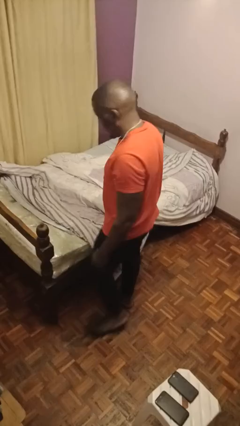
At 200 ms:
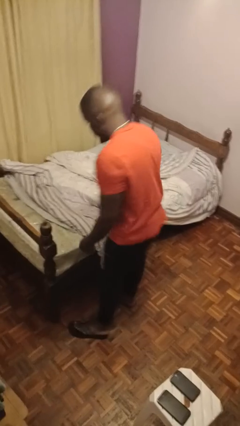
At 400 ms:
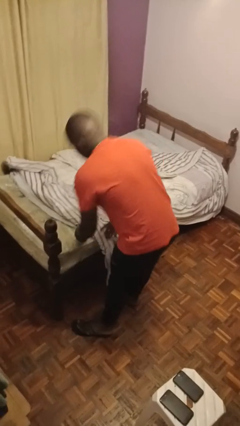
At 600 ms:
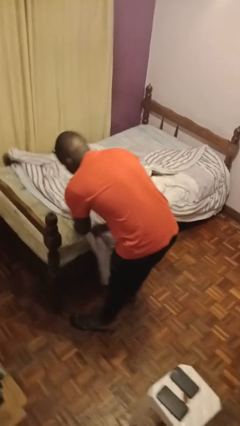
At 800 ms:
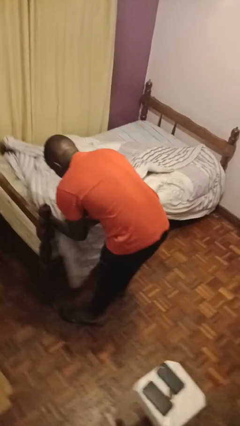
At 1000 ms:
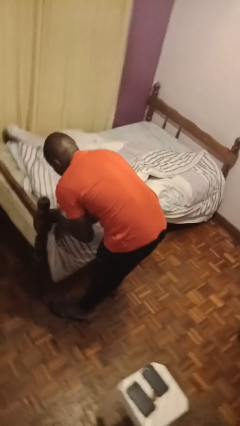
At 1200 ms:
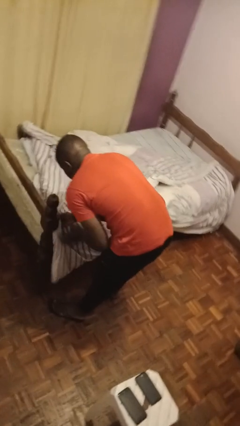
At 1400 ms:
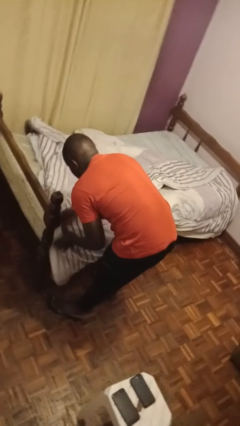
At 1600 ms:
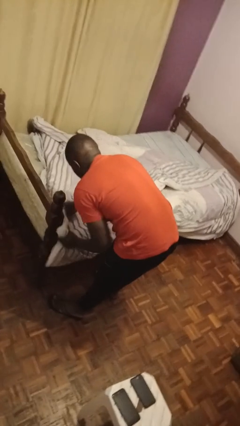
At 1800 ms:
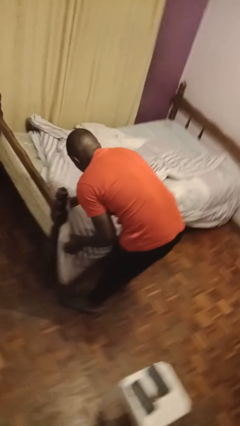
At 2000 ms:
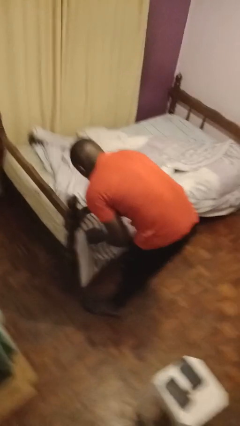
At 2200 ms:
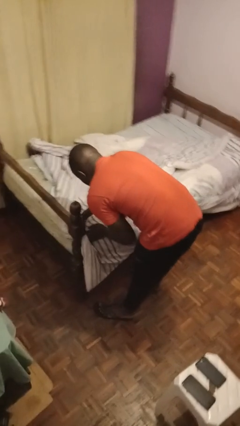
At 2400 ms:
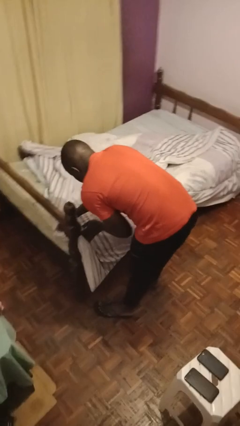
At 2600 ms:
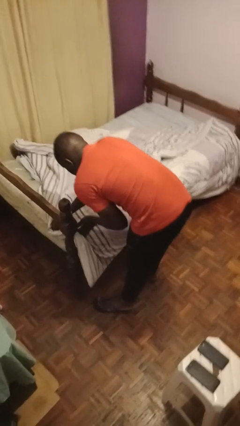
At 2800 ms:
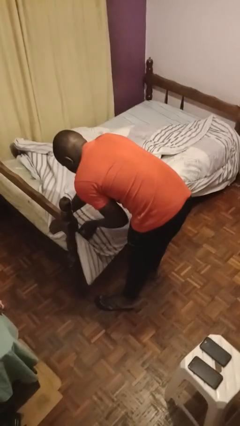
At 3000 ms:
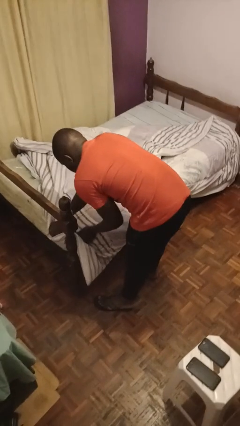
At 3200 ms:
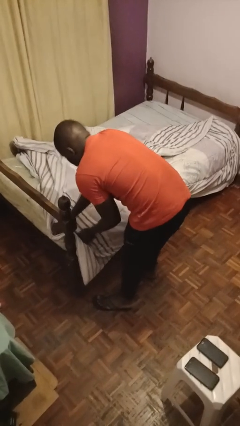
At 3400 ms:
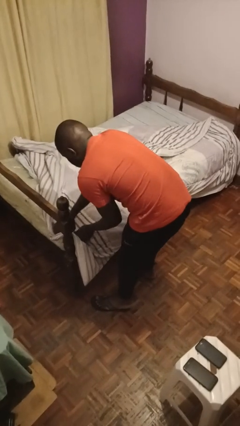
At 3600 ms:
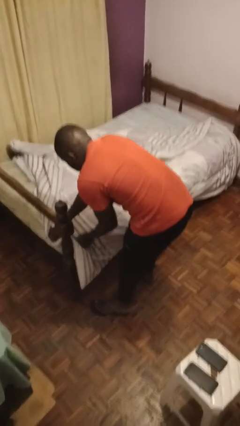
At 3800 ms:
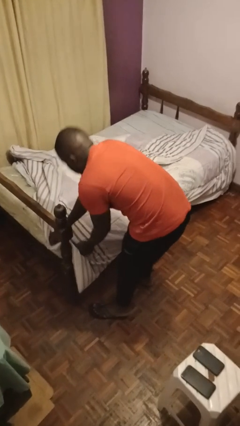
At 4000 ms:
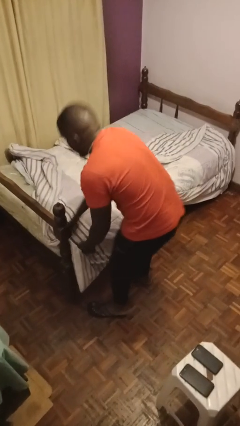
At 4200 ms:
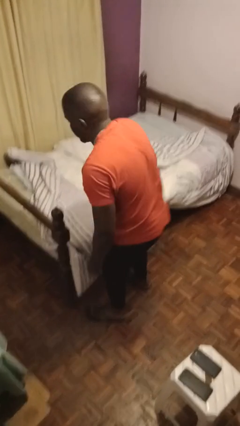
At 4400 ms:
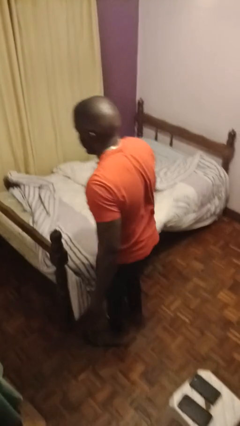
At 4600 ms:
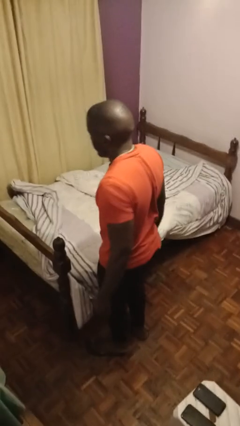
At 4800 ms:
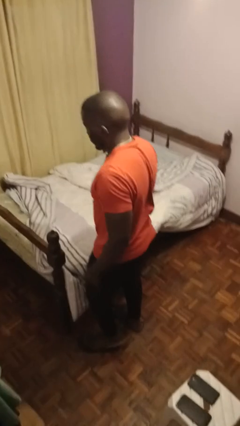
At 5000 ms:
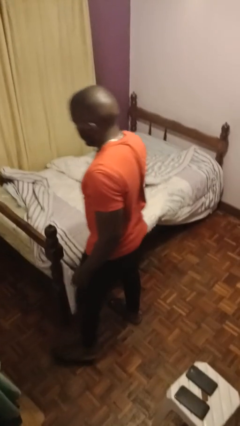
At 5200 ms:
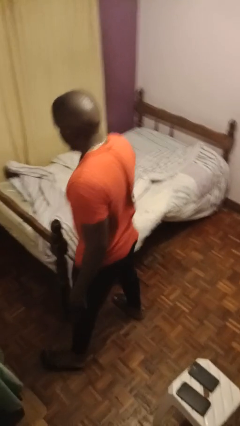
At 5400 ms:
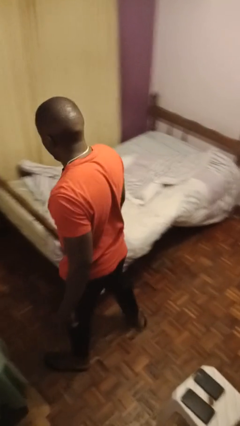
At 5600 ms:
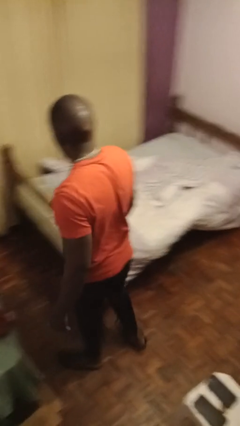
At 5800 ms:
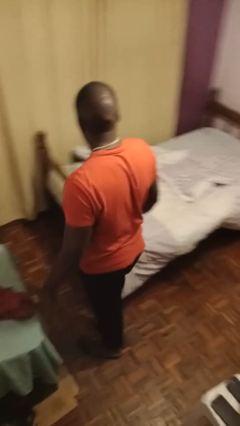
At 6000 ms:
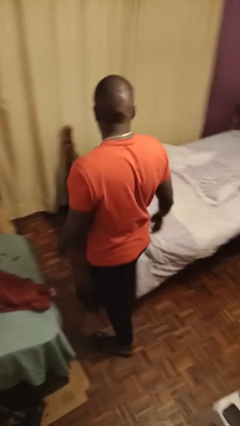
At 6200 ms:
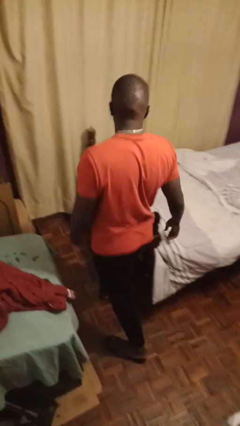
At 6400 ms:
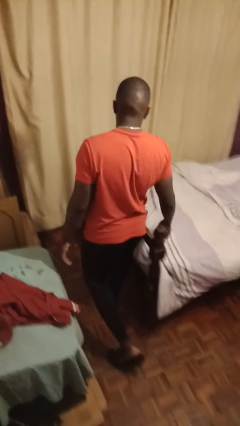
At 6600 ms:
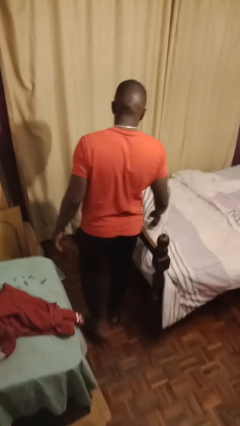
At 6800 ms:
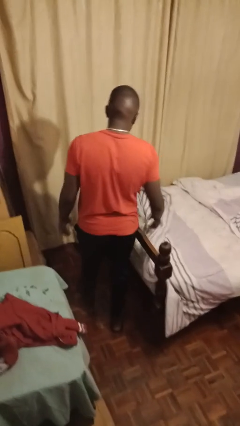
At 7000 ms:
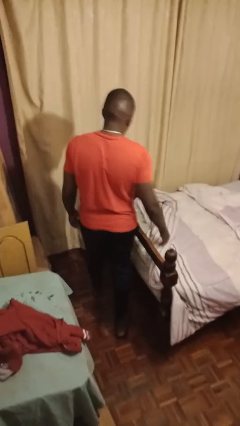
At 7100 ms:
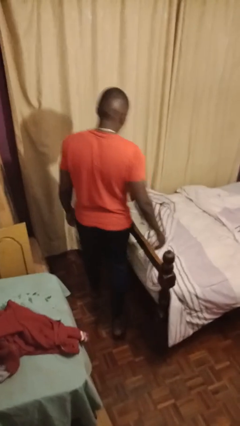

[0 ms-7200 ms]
person makes bed

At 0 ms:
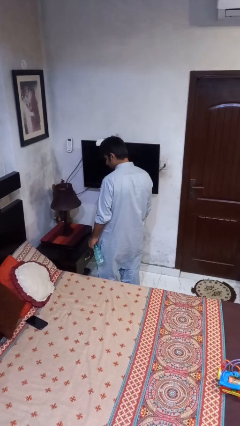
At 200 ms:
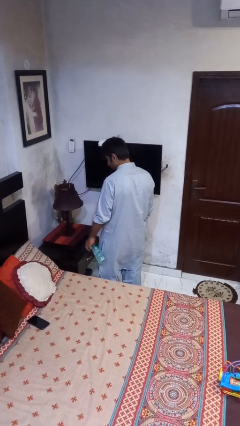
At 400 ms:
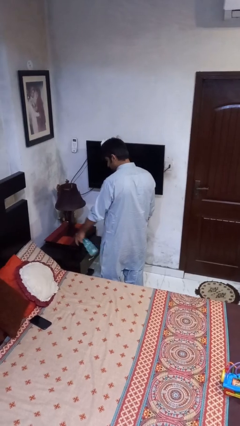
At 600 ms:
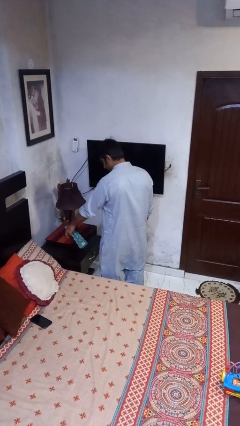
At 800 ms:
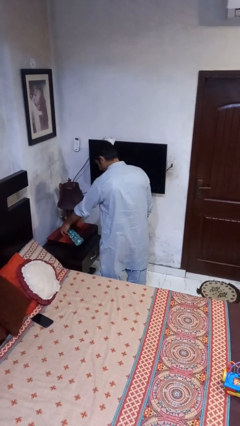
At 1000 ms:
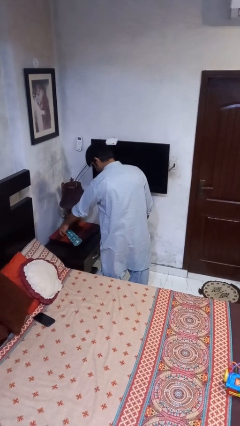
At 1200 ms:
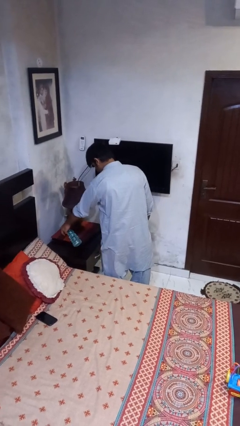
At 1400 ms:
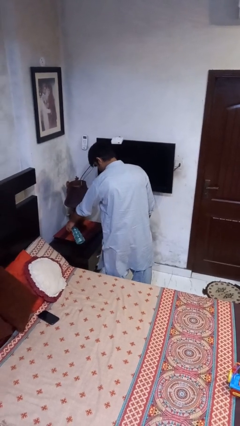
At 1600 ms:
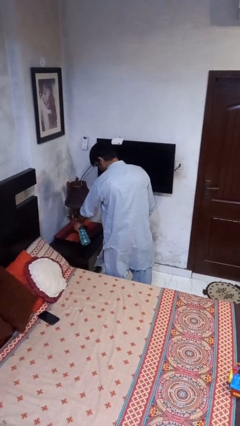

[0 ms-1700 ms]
person sprays from bottle

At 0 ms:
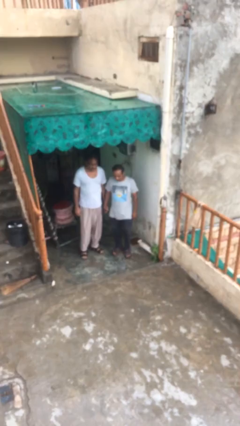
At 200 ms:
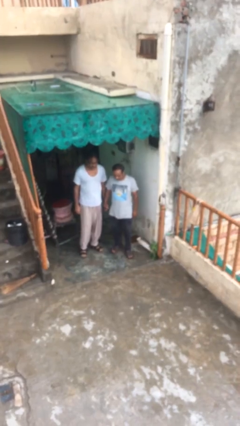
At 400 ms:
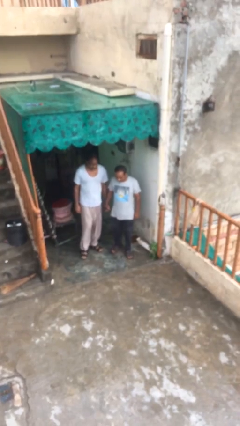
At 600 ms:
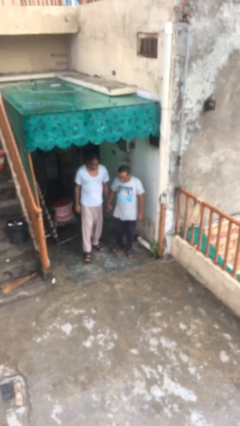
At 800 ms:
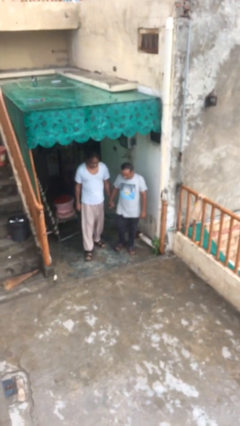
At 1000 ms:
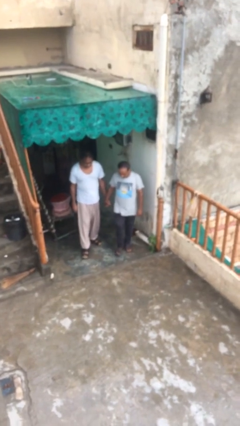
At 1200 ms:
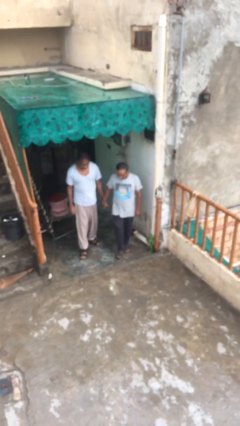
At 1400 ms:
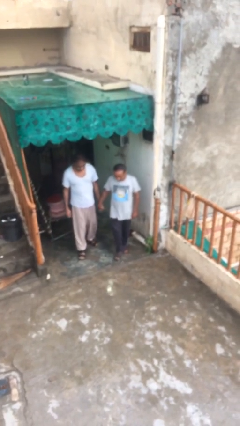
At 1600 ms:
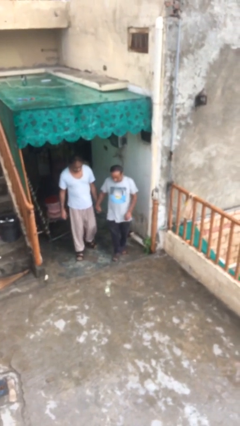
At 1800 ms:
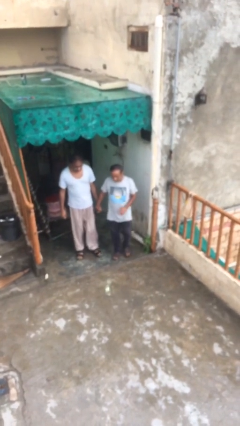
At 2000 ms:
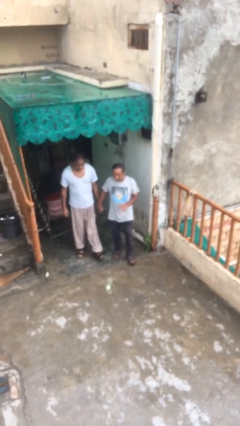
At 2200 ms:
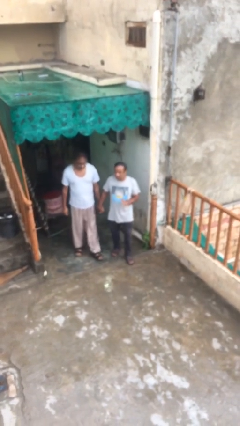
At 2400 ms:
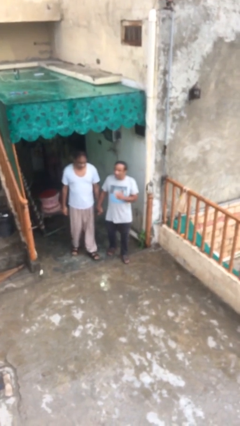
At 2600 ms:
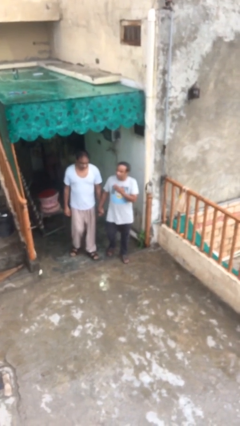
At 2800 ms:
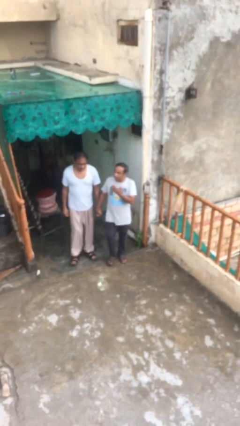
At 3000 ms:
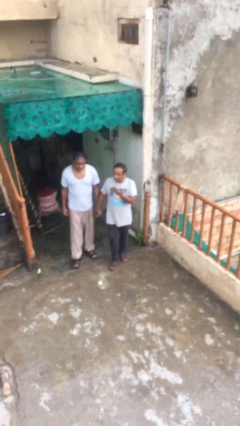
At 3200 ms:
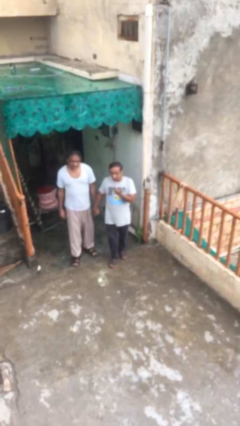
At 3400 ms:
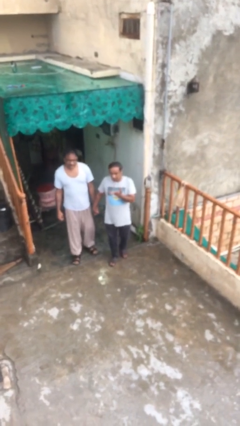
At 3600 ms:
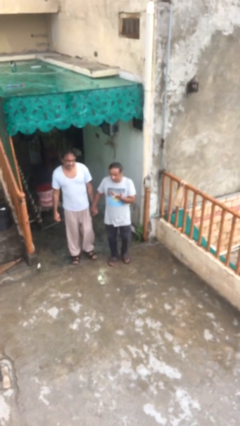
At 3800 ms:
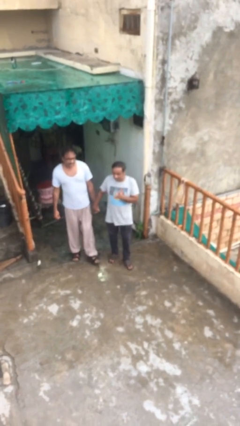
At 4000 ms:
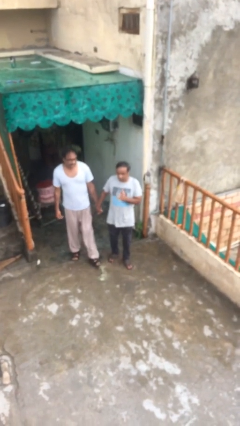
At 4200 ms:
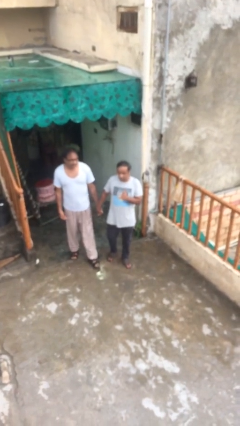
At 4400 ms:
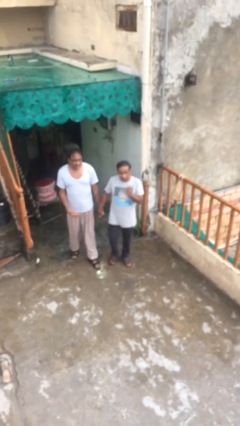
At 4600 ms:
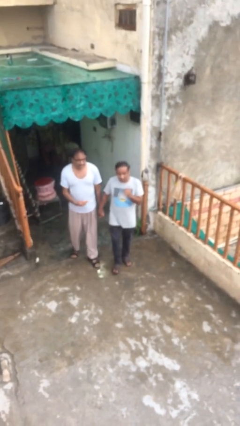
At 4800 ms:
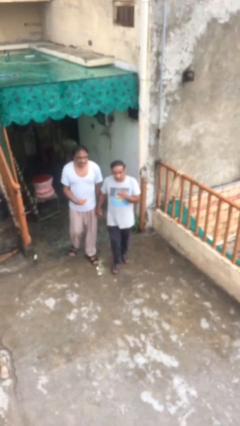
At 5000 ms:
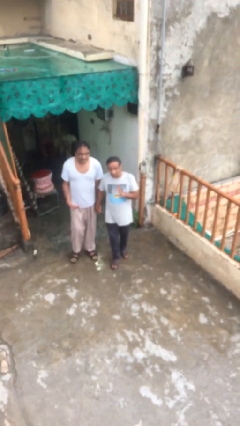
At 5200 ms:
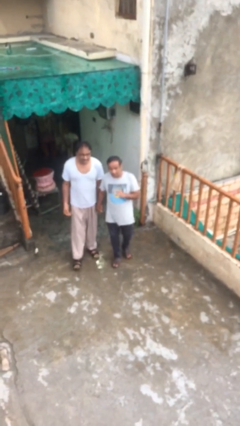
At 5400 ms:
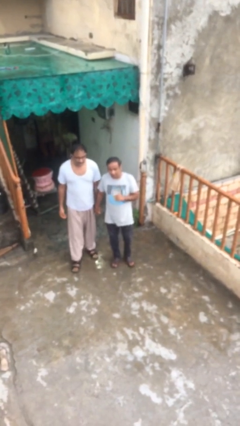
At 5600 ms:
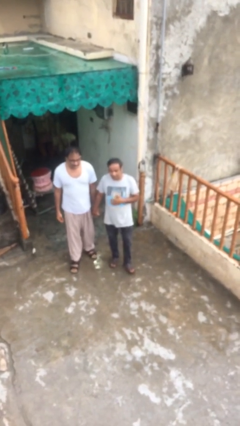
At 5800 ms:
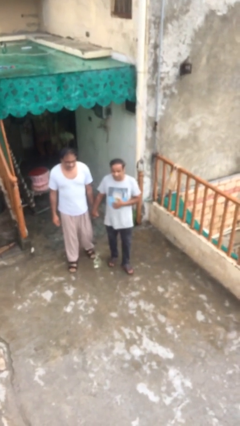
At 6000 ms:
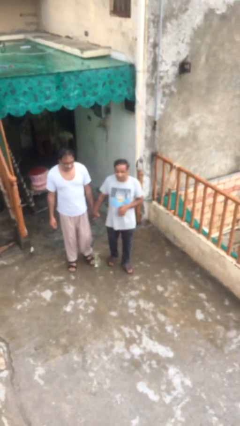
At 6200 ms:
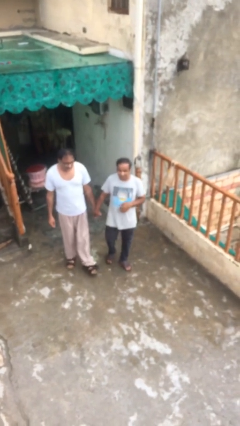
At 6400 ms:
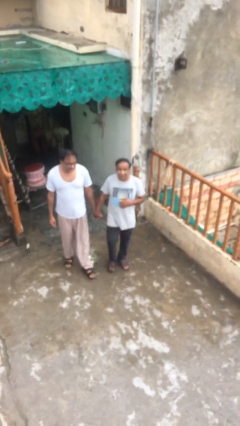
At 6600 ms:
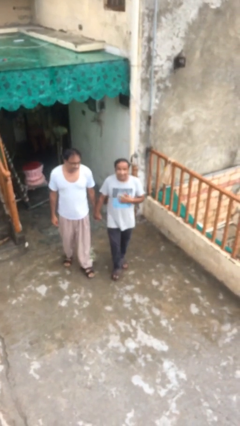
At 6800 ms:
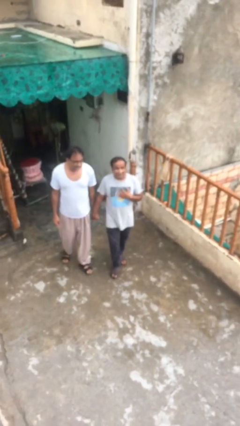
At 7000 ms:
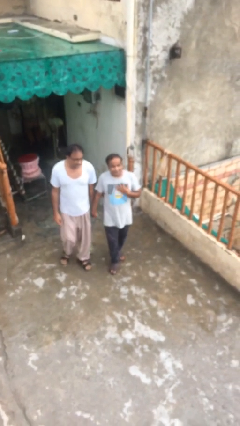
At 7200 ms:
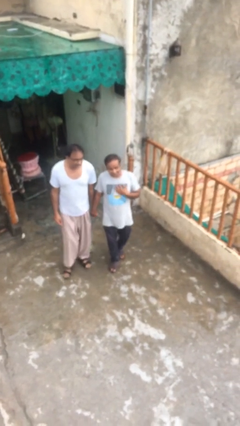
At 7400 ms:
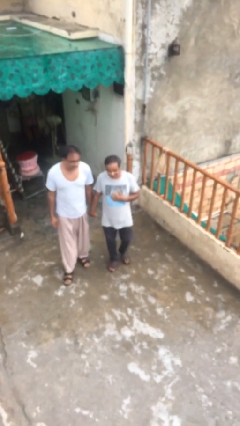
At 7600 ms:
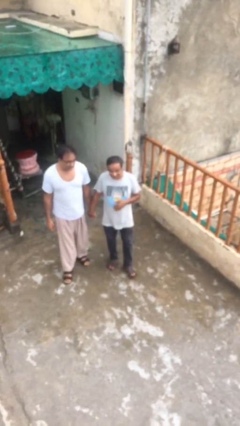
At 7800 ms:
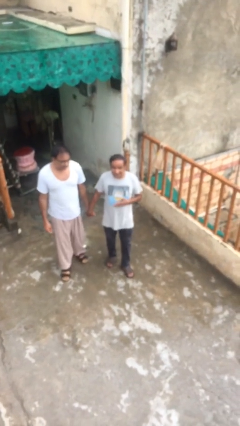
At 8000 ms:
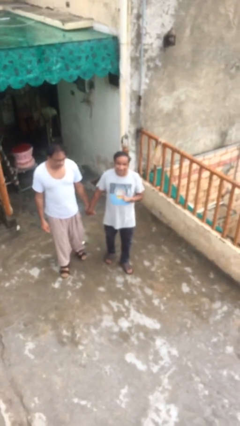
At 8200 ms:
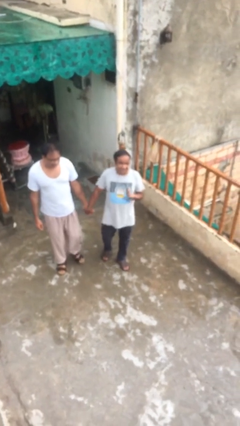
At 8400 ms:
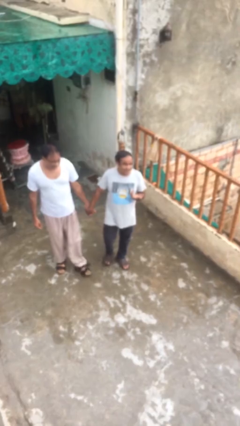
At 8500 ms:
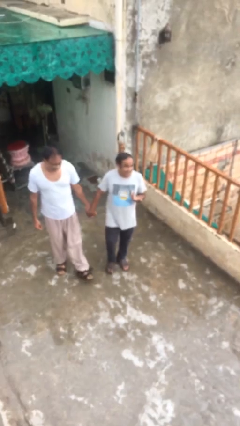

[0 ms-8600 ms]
person holds hand

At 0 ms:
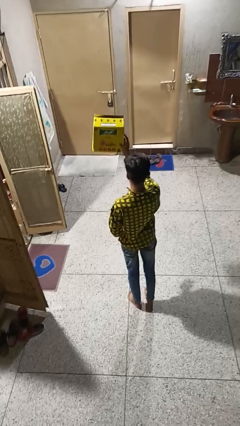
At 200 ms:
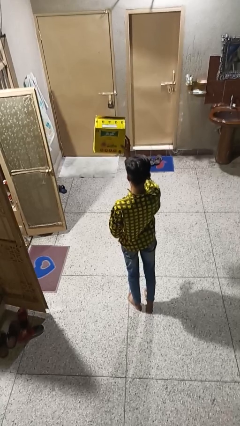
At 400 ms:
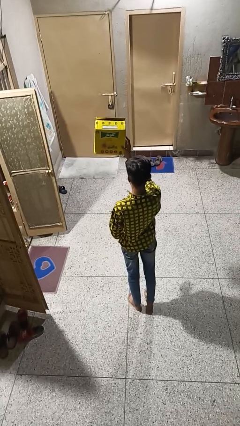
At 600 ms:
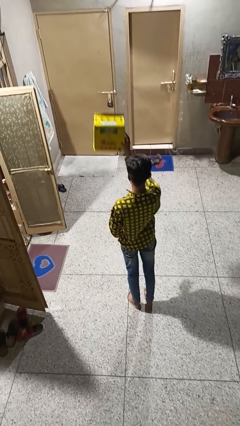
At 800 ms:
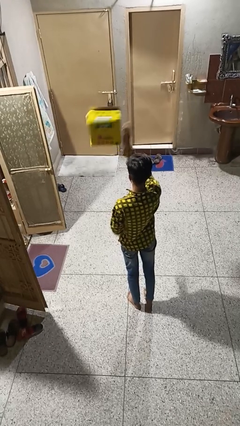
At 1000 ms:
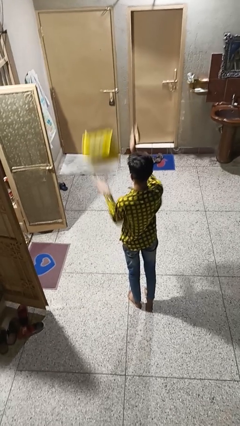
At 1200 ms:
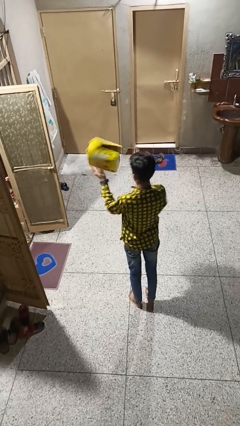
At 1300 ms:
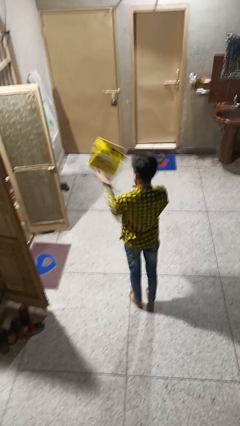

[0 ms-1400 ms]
person drops object
